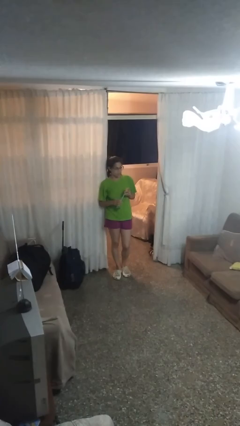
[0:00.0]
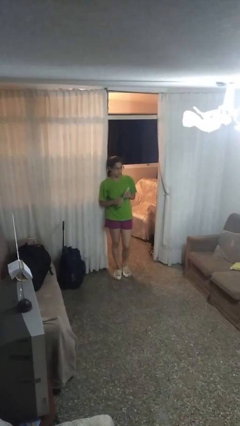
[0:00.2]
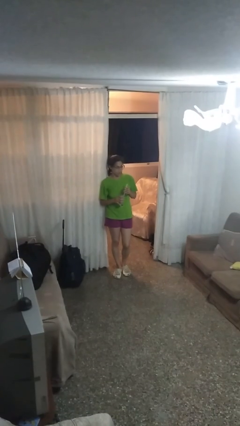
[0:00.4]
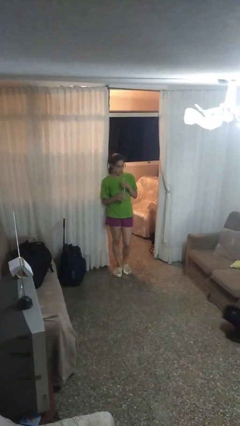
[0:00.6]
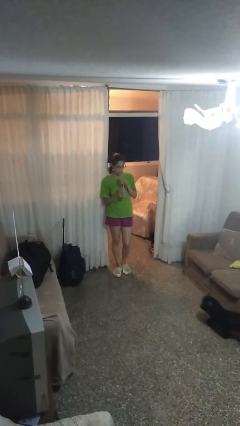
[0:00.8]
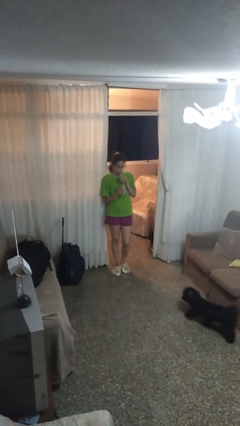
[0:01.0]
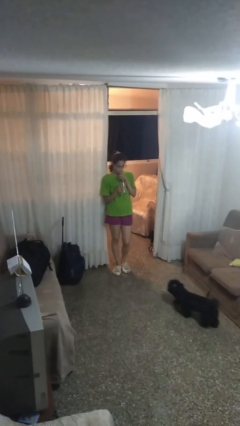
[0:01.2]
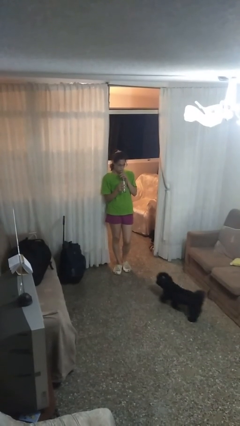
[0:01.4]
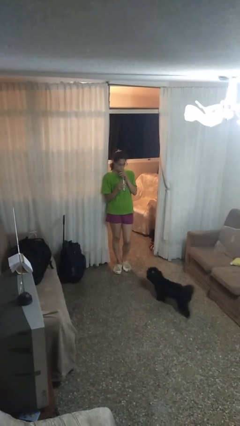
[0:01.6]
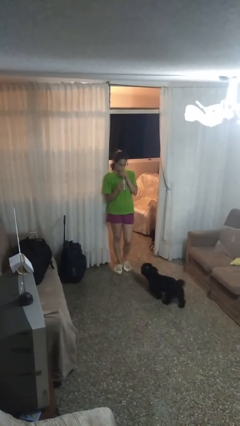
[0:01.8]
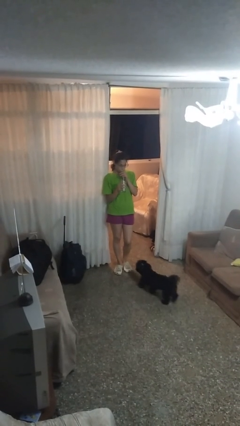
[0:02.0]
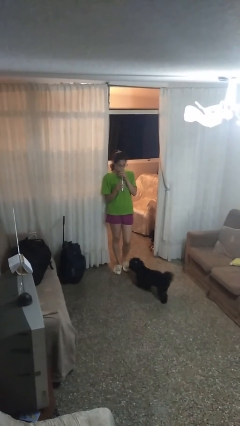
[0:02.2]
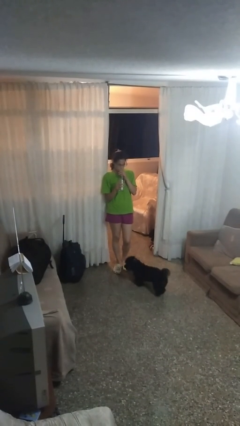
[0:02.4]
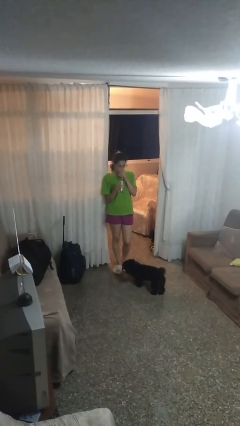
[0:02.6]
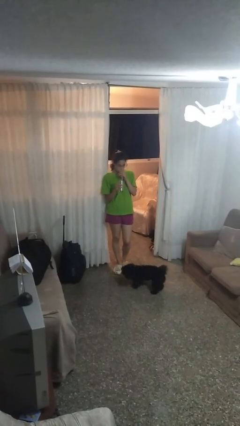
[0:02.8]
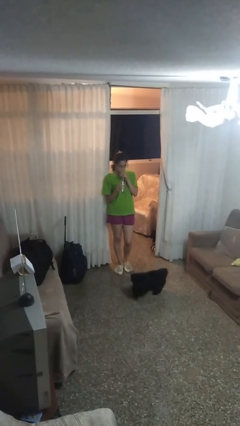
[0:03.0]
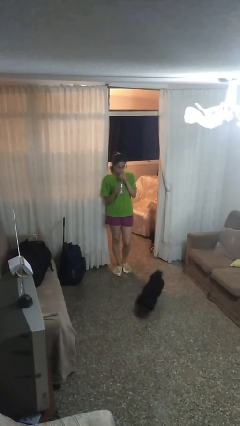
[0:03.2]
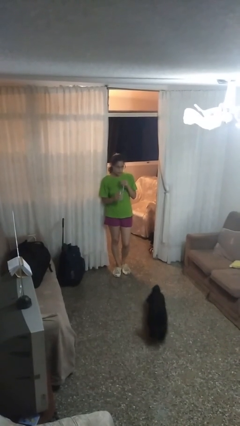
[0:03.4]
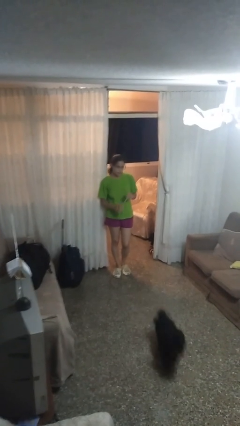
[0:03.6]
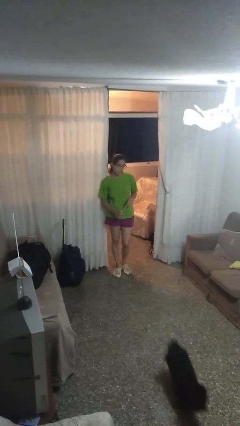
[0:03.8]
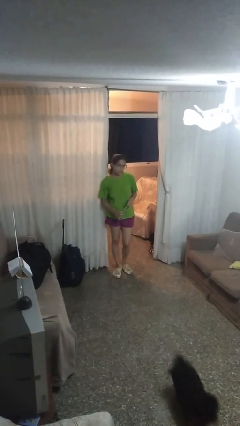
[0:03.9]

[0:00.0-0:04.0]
person drinks from straw

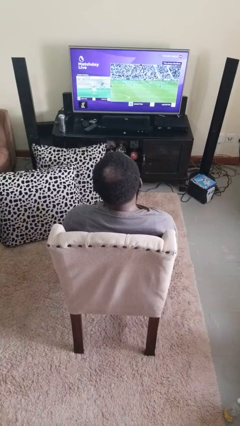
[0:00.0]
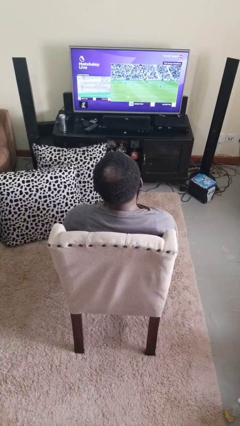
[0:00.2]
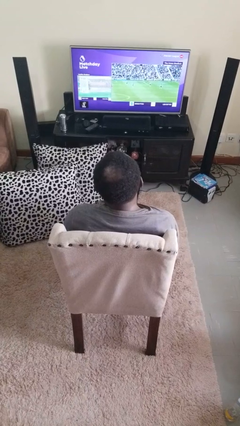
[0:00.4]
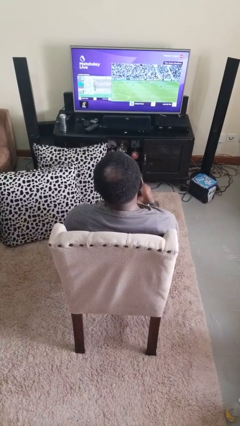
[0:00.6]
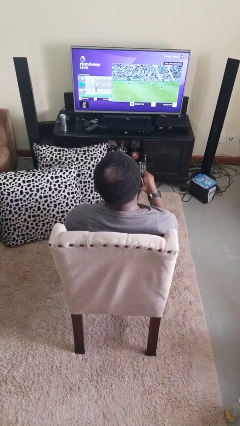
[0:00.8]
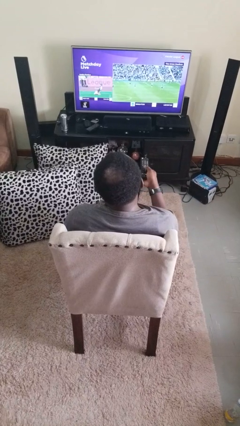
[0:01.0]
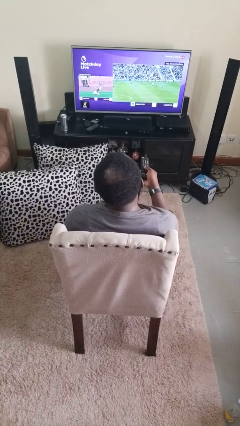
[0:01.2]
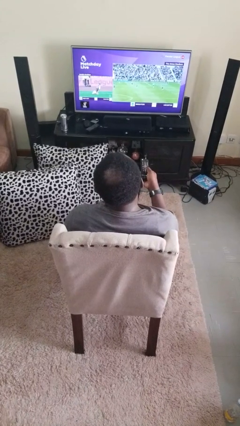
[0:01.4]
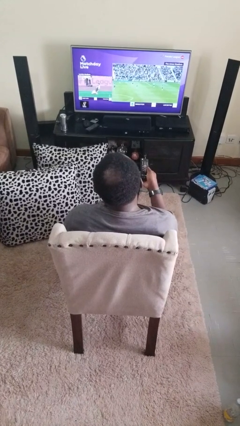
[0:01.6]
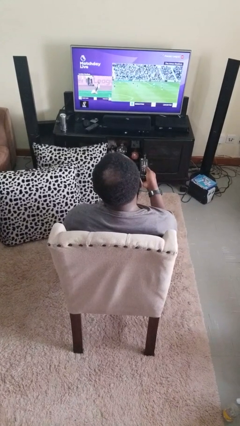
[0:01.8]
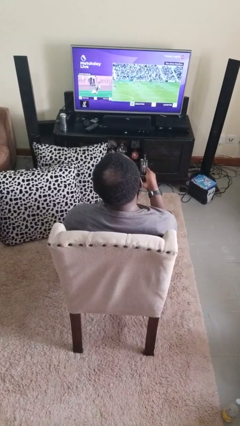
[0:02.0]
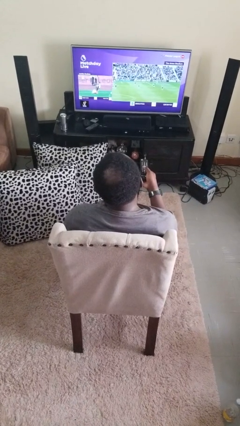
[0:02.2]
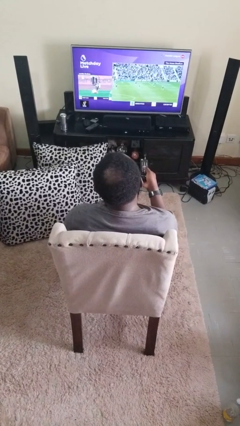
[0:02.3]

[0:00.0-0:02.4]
person uses television remote

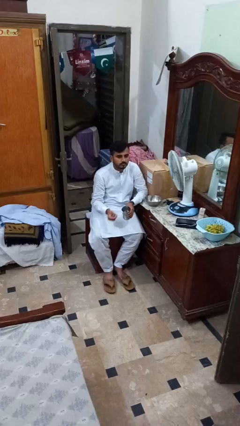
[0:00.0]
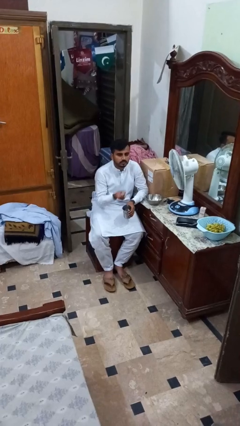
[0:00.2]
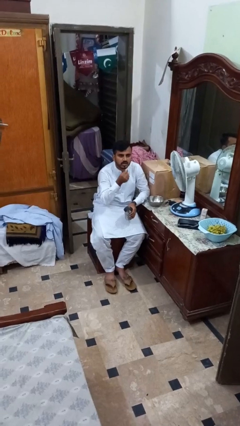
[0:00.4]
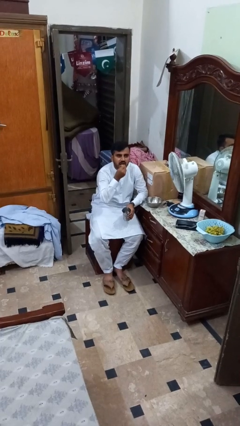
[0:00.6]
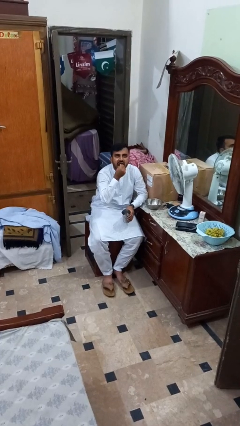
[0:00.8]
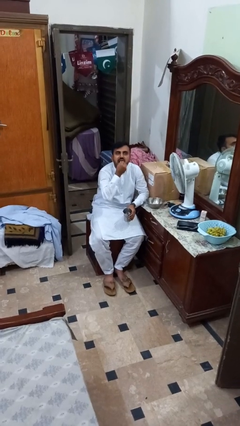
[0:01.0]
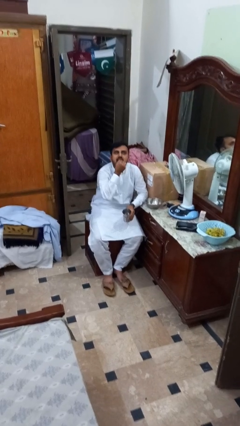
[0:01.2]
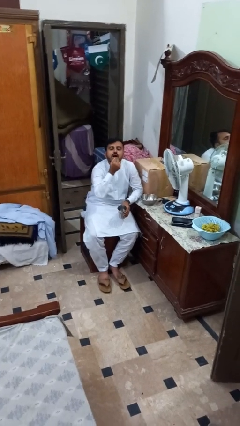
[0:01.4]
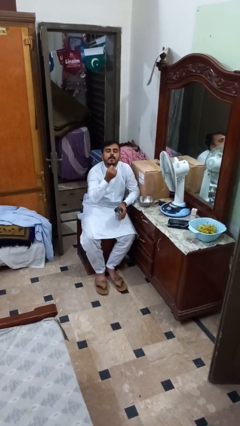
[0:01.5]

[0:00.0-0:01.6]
person takes medicine pills

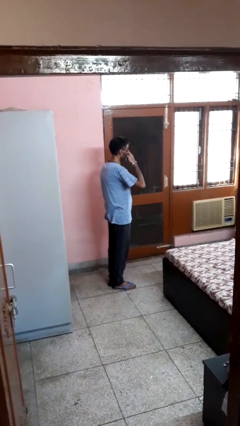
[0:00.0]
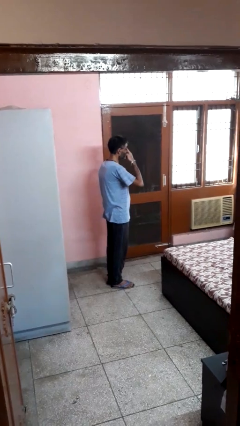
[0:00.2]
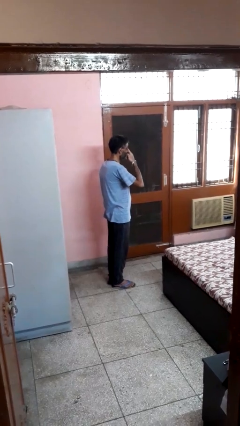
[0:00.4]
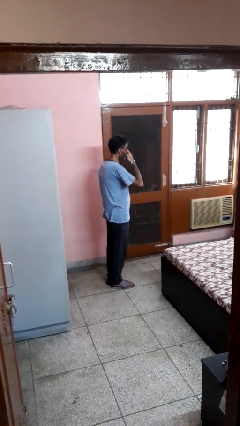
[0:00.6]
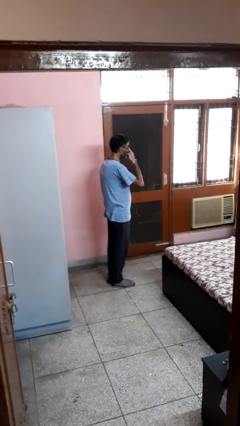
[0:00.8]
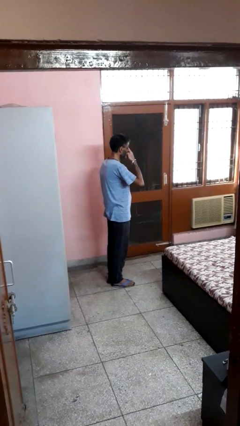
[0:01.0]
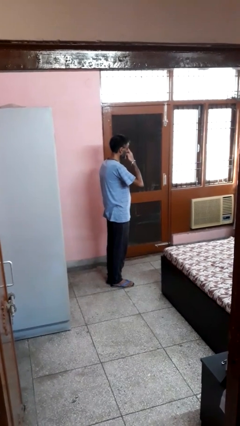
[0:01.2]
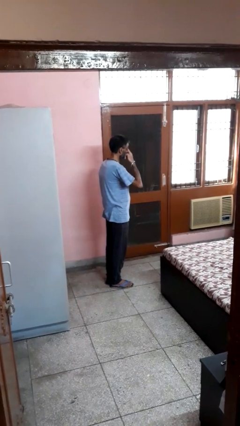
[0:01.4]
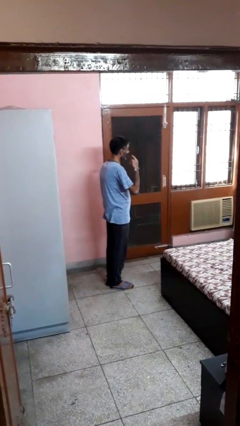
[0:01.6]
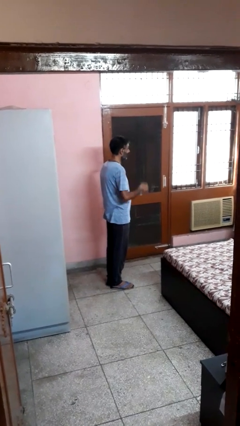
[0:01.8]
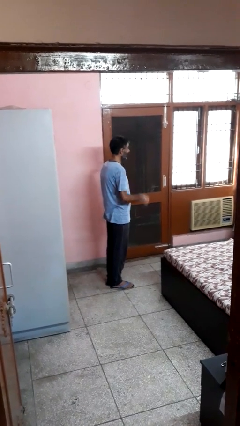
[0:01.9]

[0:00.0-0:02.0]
person rubs eyes

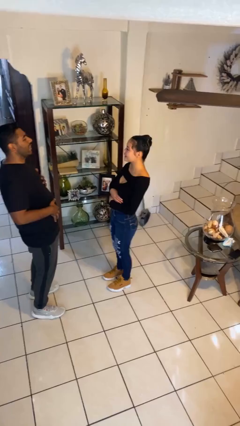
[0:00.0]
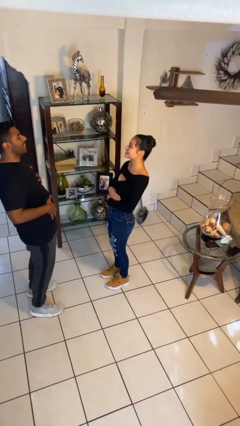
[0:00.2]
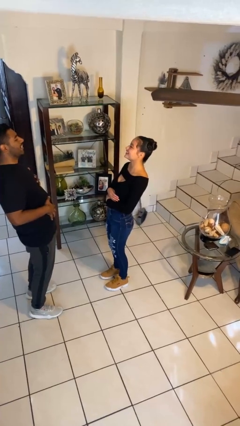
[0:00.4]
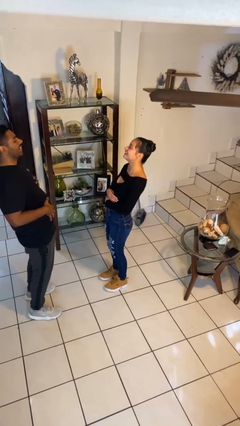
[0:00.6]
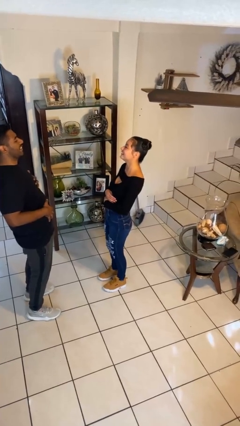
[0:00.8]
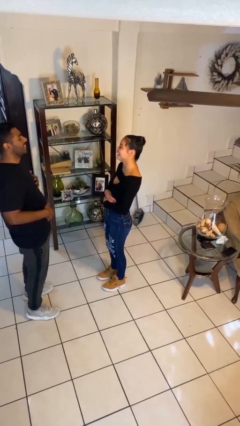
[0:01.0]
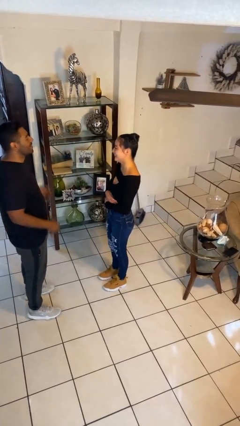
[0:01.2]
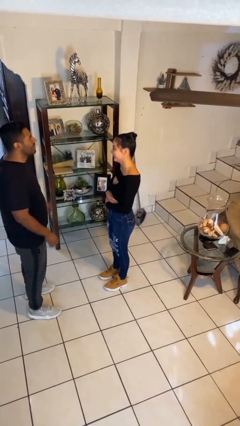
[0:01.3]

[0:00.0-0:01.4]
person laughs with person

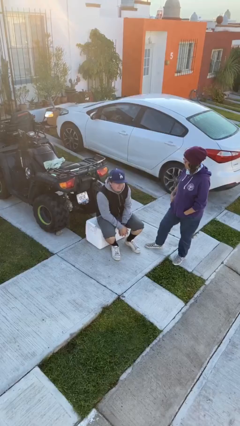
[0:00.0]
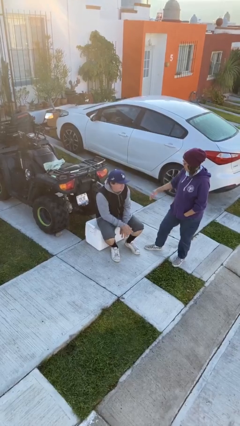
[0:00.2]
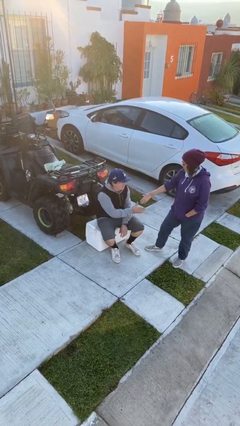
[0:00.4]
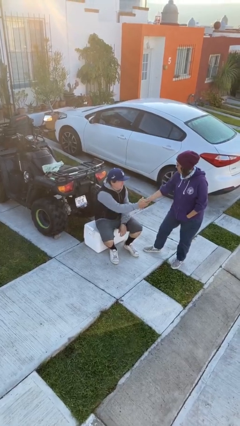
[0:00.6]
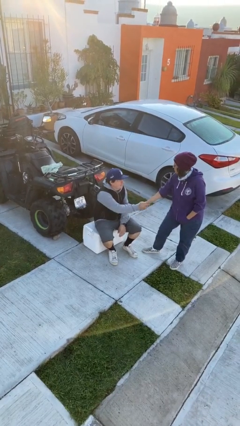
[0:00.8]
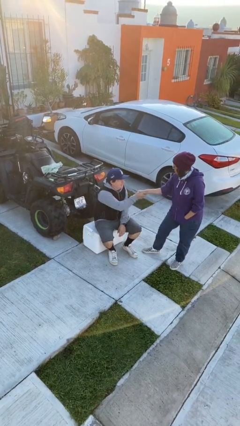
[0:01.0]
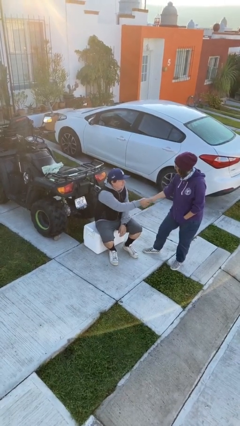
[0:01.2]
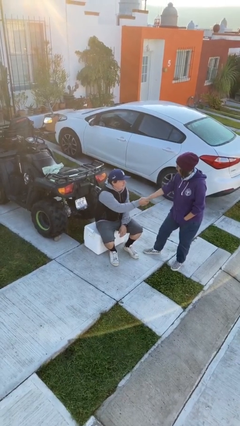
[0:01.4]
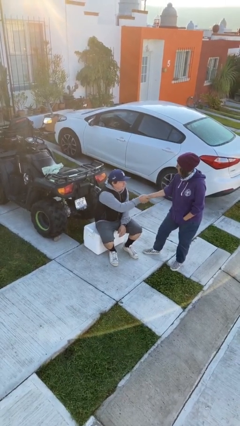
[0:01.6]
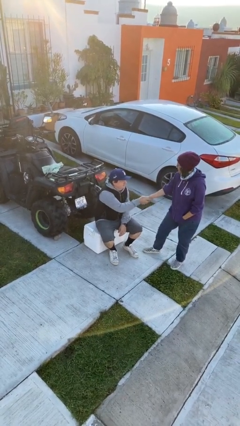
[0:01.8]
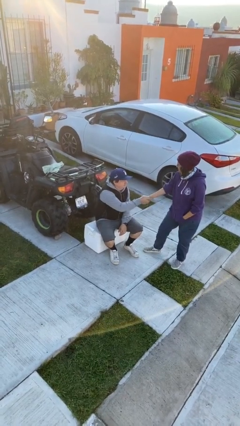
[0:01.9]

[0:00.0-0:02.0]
person shakes hand

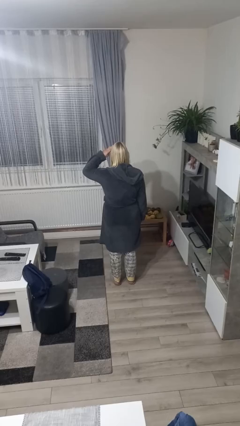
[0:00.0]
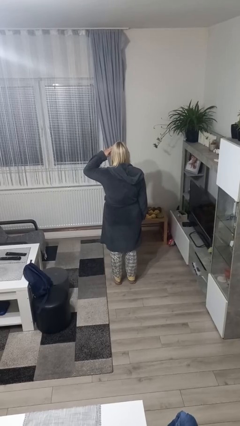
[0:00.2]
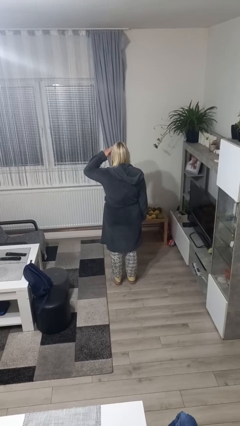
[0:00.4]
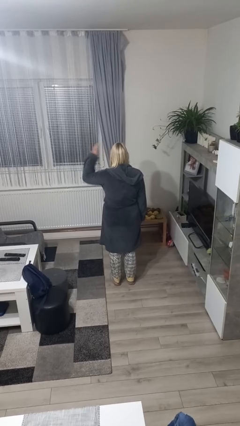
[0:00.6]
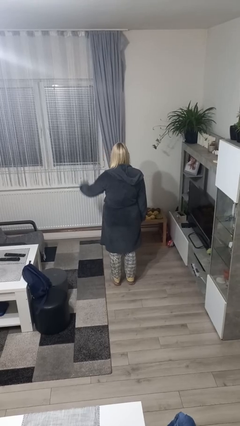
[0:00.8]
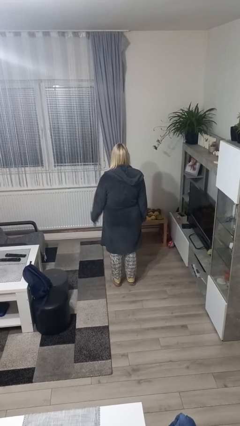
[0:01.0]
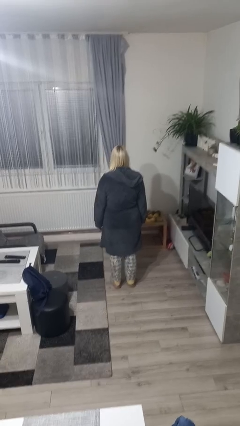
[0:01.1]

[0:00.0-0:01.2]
person salutes

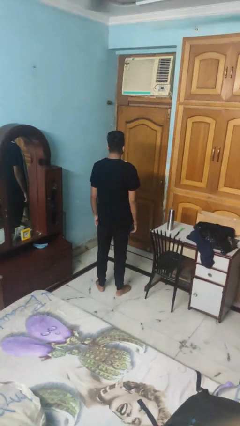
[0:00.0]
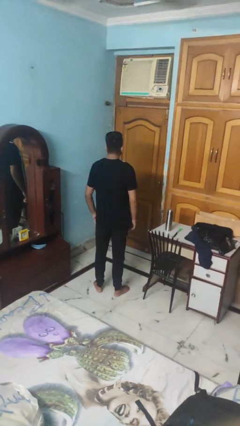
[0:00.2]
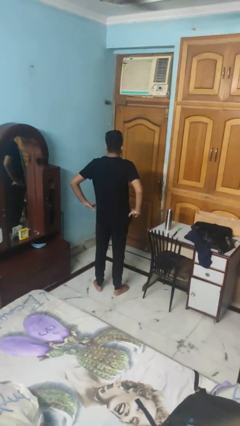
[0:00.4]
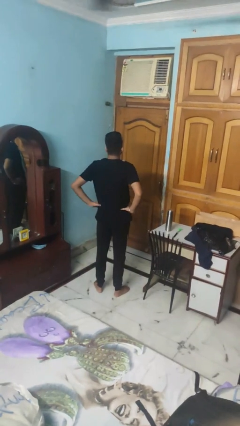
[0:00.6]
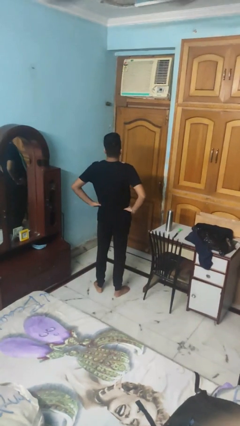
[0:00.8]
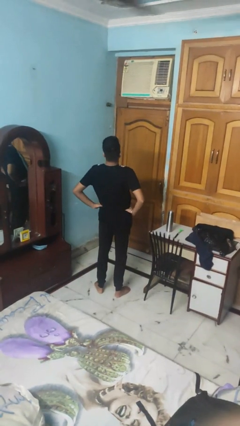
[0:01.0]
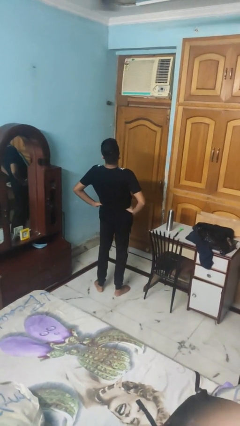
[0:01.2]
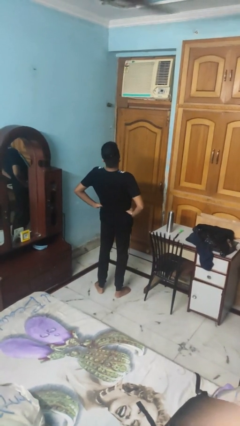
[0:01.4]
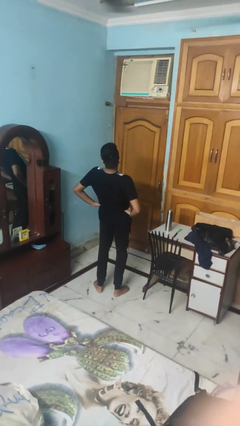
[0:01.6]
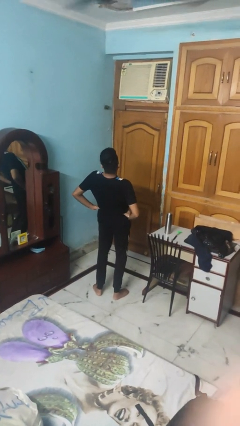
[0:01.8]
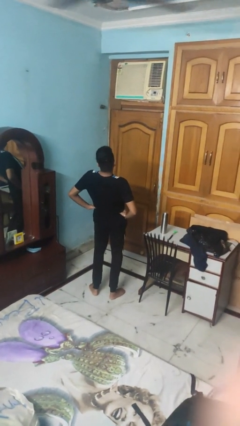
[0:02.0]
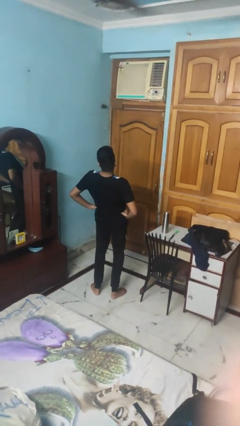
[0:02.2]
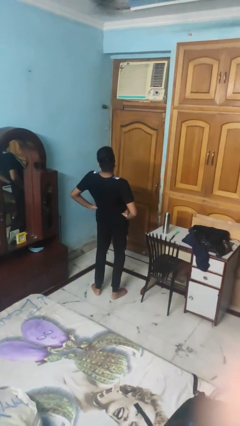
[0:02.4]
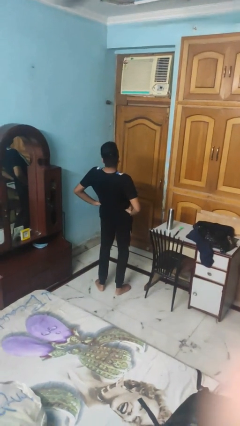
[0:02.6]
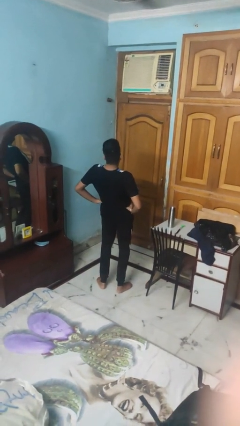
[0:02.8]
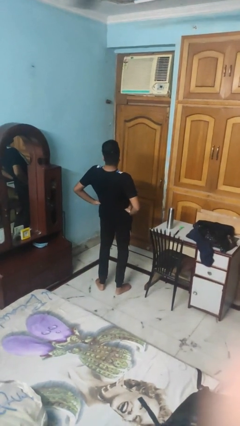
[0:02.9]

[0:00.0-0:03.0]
person stretches back
